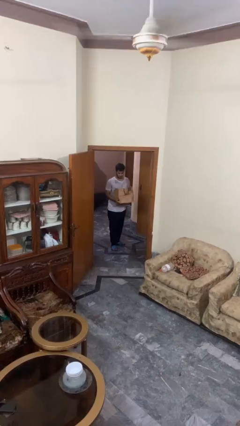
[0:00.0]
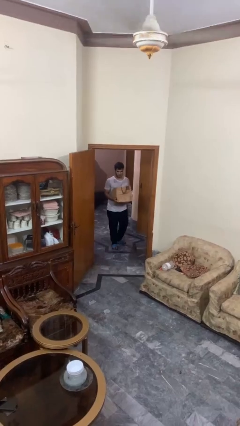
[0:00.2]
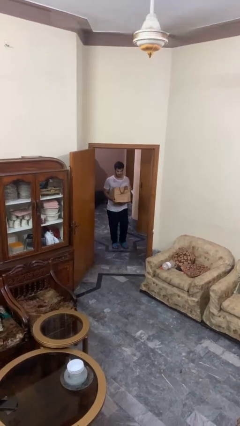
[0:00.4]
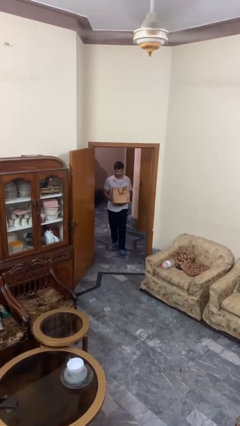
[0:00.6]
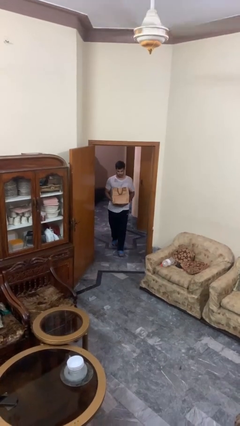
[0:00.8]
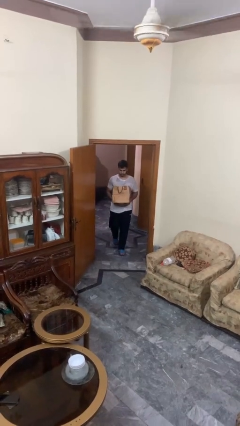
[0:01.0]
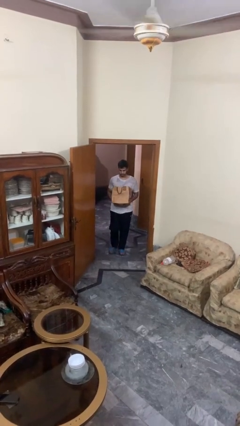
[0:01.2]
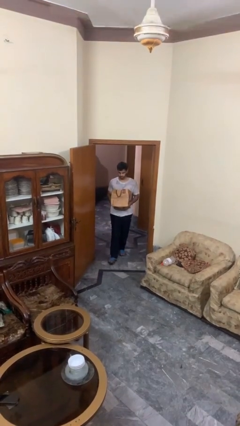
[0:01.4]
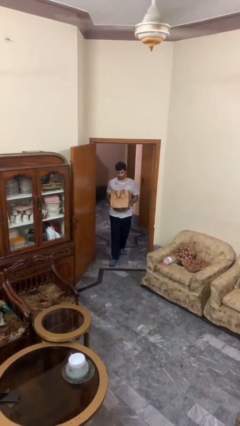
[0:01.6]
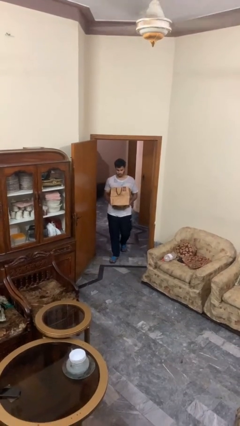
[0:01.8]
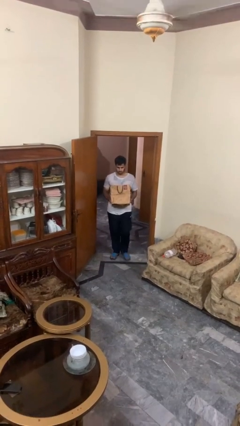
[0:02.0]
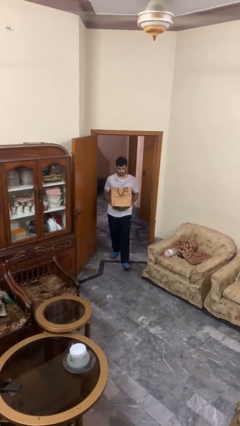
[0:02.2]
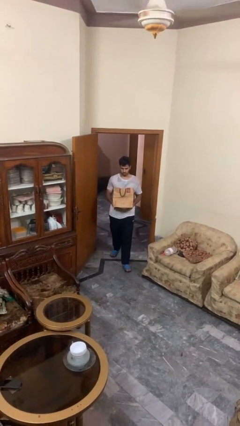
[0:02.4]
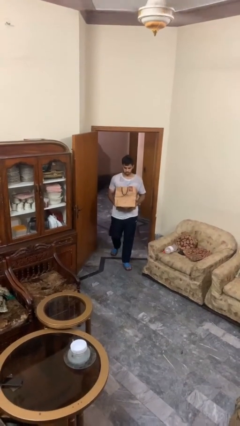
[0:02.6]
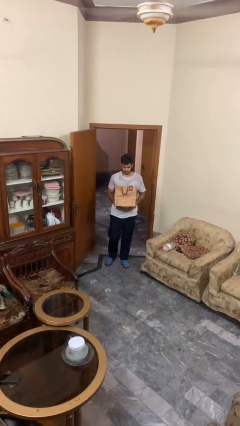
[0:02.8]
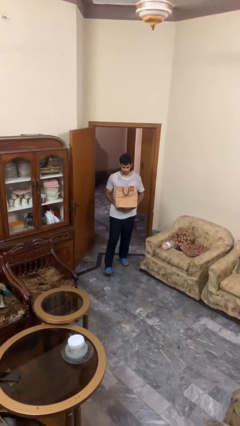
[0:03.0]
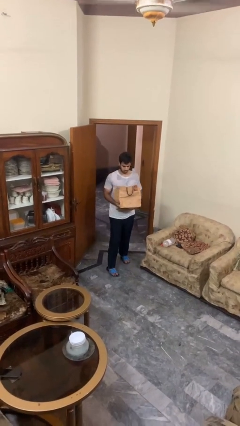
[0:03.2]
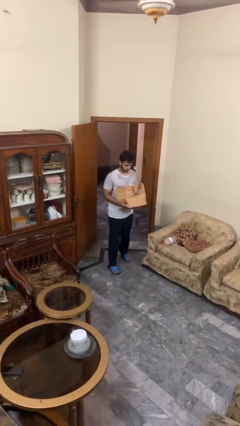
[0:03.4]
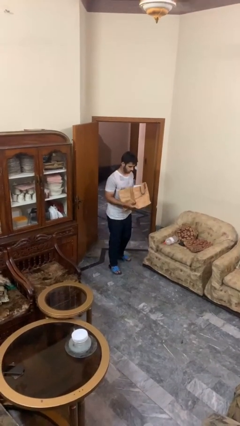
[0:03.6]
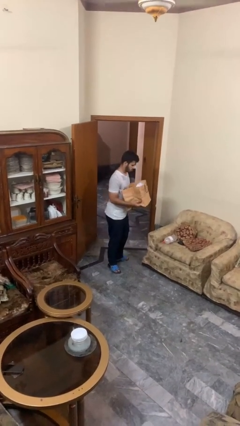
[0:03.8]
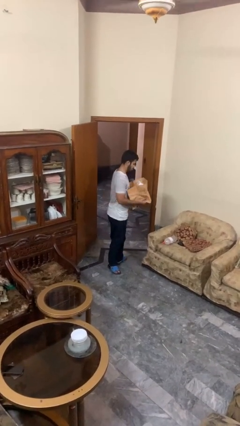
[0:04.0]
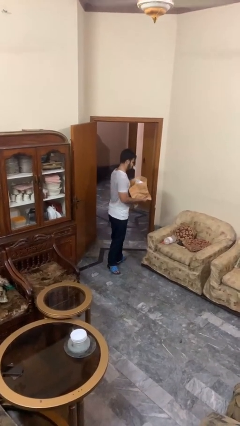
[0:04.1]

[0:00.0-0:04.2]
person carries groceries

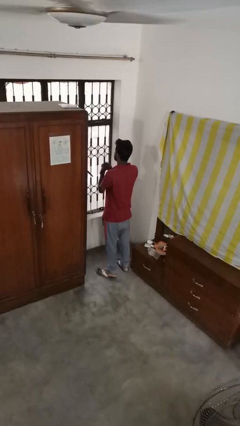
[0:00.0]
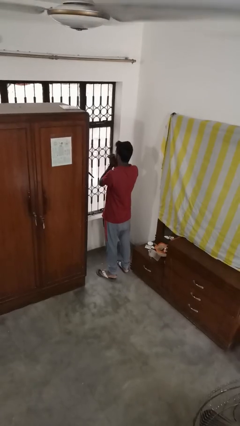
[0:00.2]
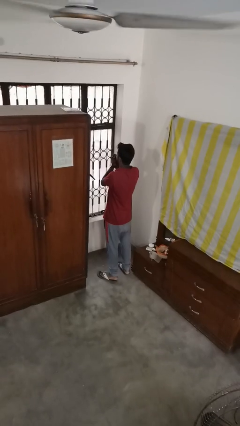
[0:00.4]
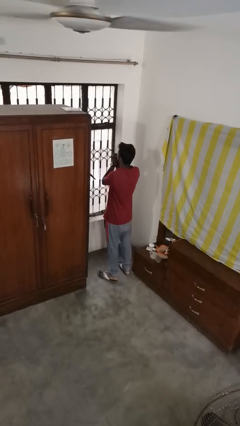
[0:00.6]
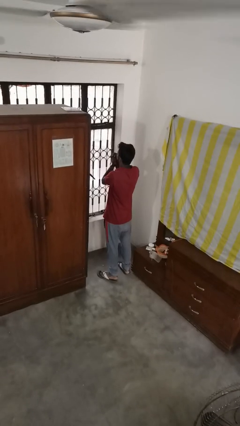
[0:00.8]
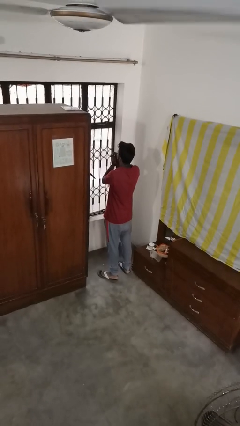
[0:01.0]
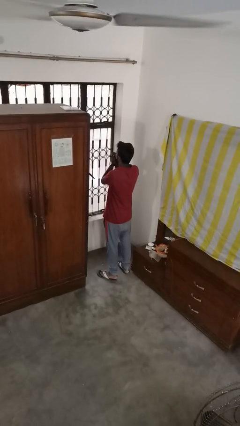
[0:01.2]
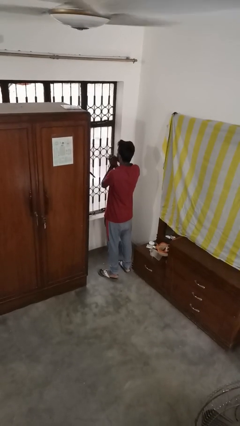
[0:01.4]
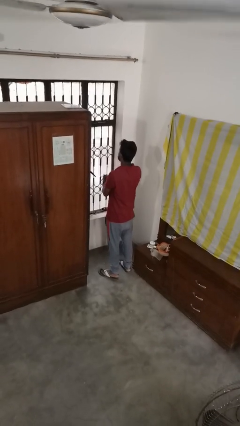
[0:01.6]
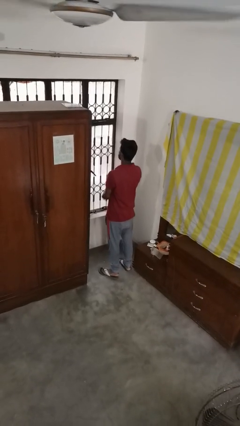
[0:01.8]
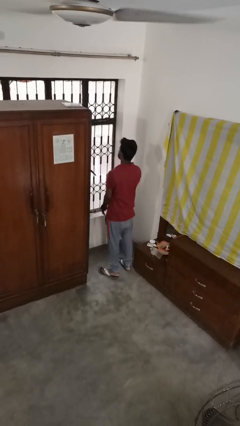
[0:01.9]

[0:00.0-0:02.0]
person blows into hands

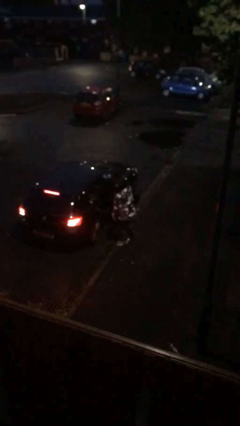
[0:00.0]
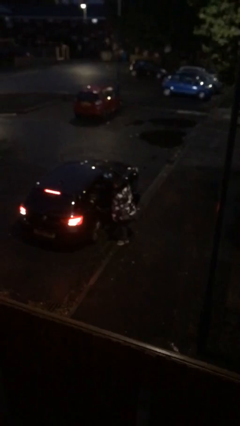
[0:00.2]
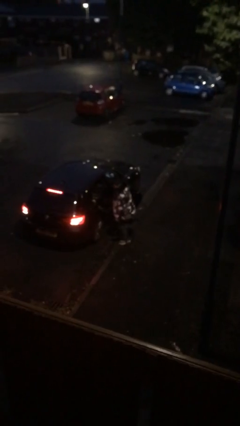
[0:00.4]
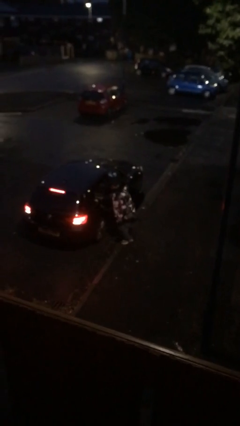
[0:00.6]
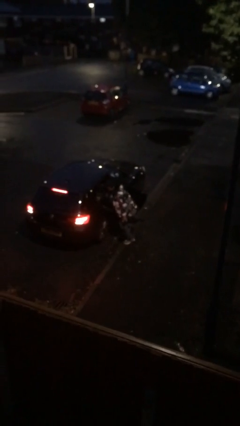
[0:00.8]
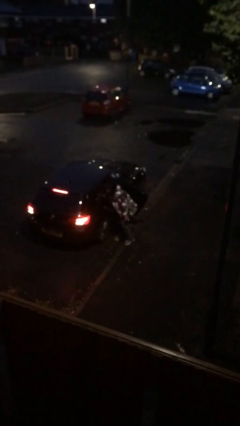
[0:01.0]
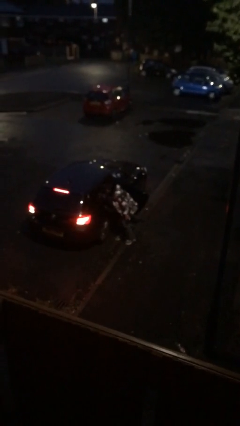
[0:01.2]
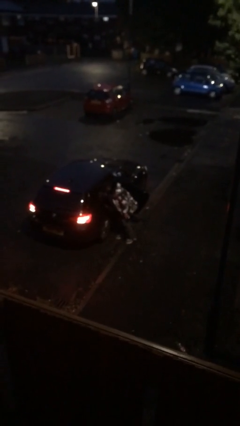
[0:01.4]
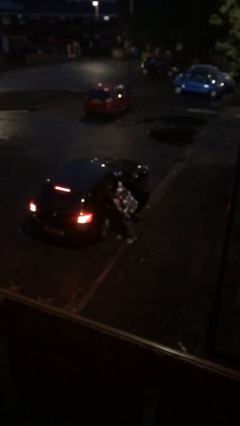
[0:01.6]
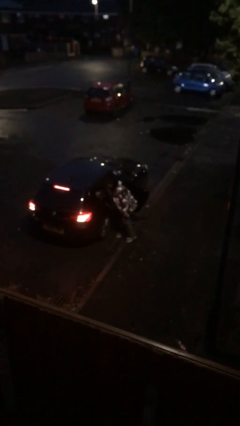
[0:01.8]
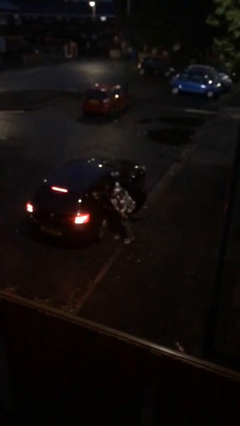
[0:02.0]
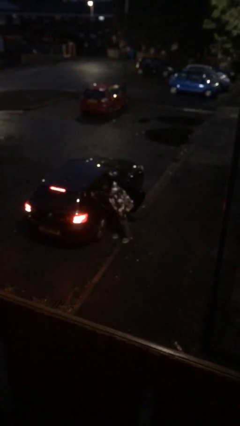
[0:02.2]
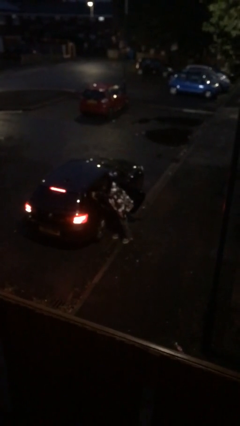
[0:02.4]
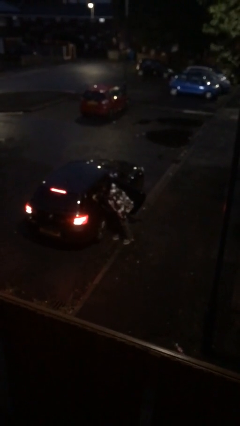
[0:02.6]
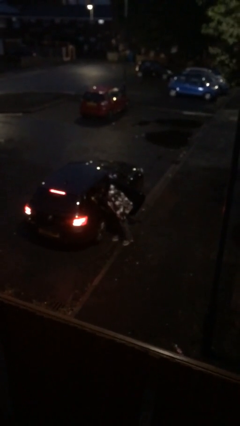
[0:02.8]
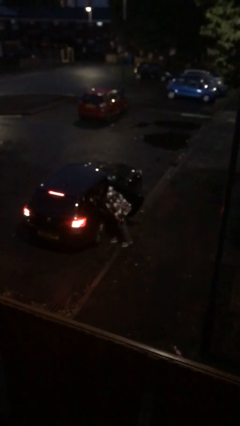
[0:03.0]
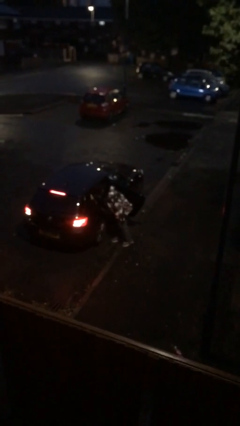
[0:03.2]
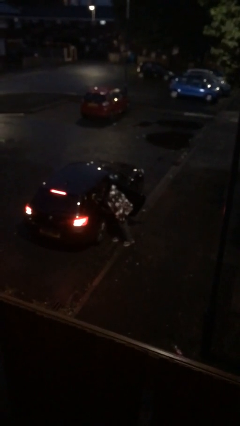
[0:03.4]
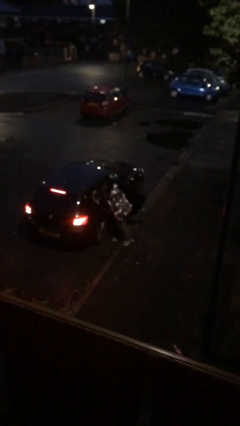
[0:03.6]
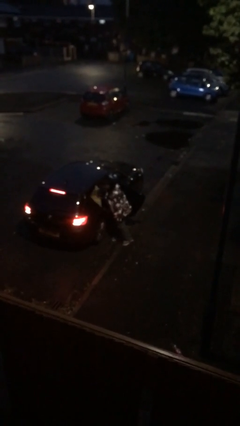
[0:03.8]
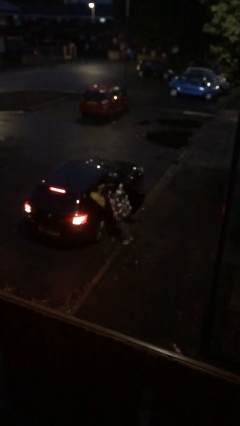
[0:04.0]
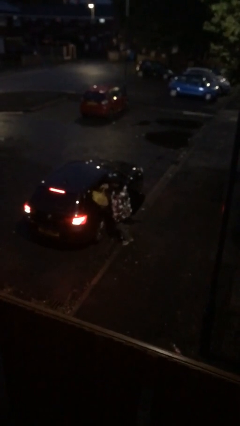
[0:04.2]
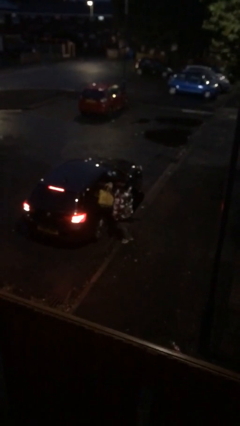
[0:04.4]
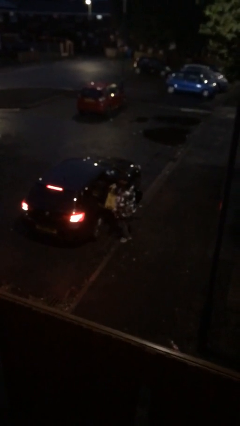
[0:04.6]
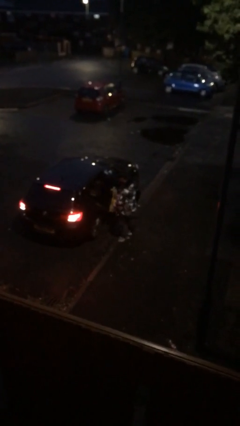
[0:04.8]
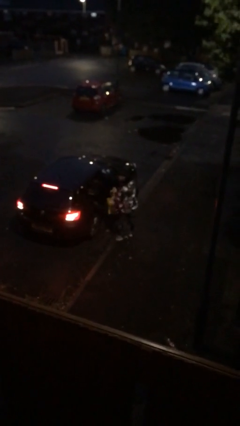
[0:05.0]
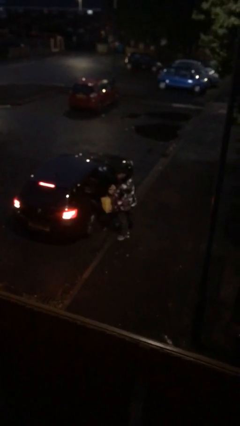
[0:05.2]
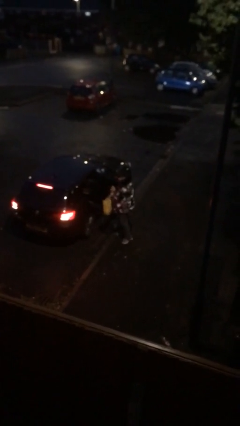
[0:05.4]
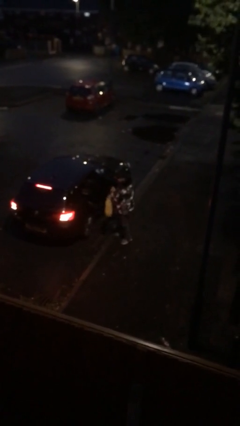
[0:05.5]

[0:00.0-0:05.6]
person unloads car

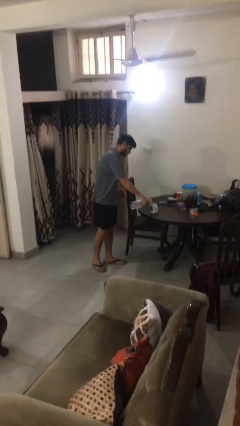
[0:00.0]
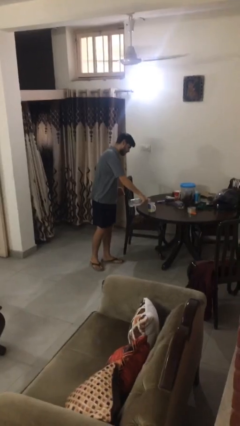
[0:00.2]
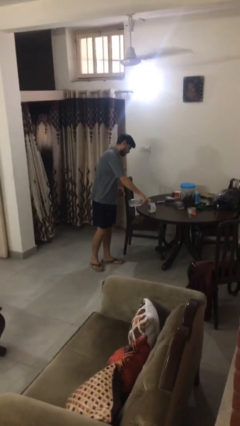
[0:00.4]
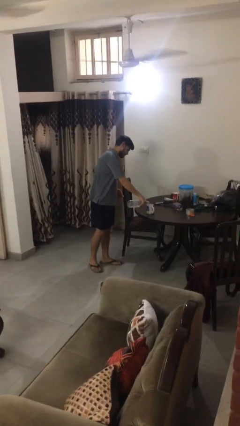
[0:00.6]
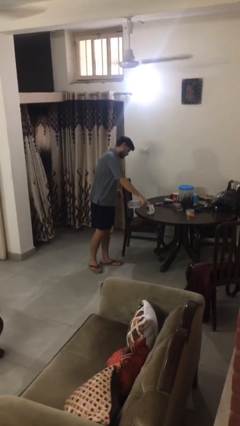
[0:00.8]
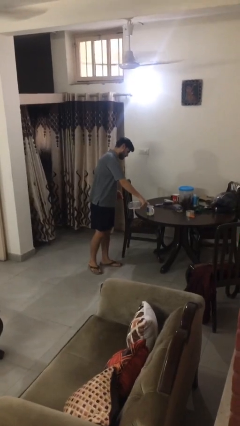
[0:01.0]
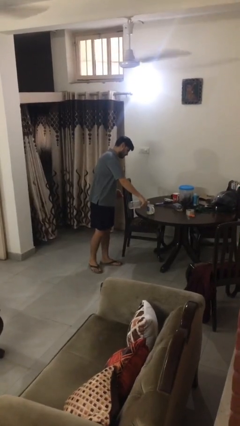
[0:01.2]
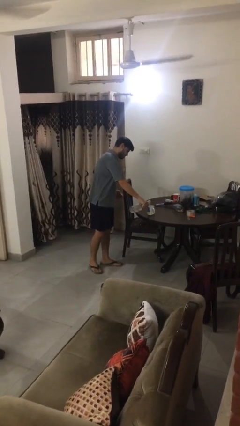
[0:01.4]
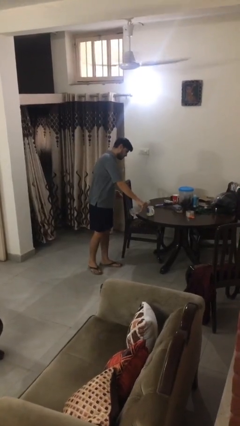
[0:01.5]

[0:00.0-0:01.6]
person pours liquid into cup

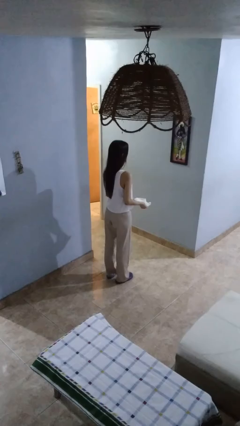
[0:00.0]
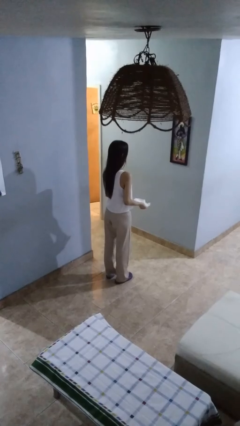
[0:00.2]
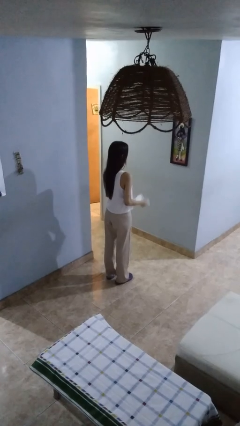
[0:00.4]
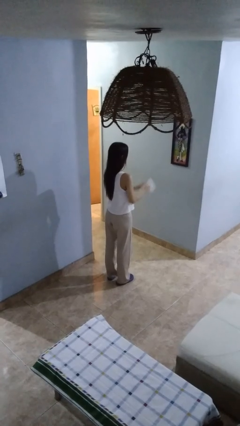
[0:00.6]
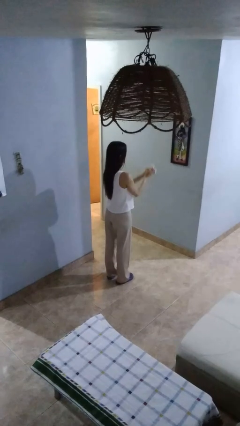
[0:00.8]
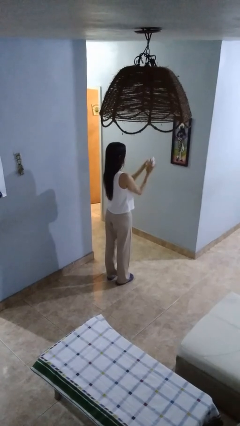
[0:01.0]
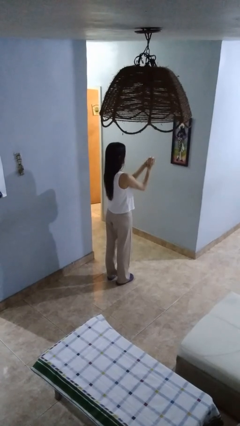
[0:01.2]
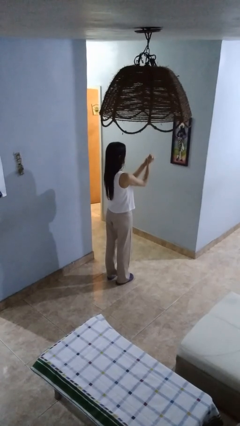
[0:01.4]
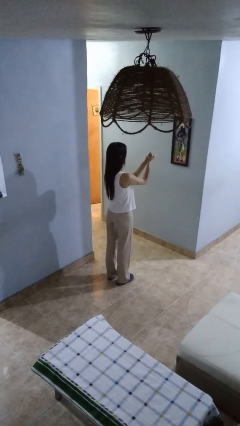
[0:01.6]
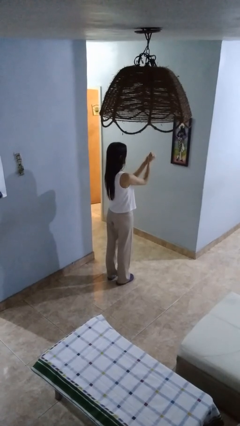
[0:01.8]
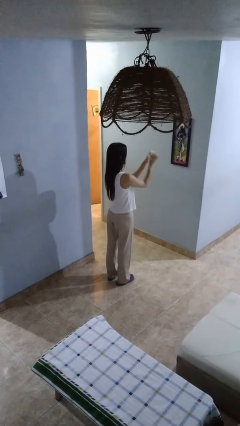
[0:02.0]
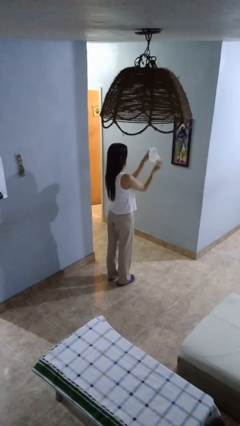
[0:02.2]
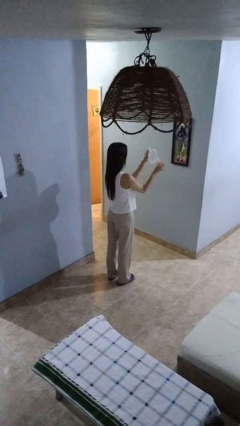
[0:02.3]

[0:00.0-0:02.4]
person crumples paper

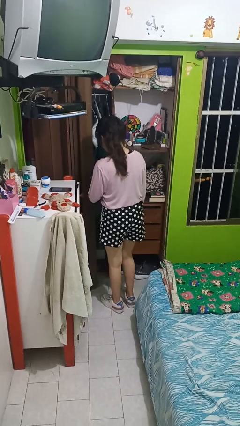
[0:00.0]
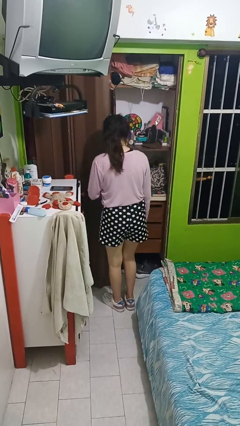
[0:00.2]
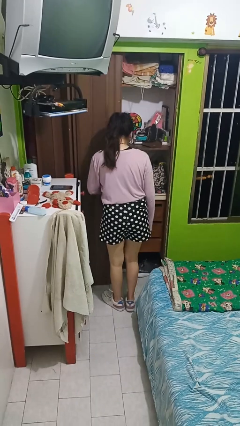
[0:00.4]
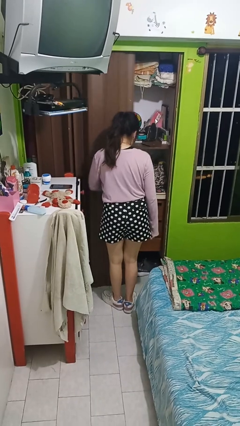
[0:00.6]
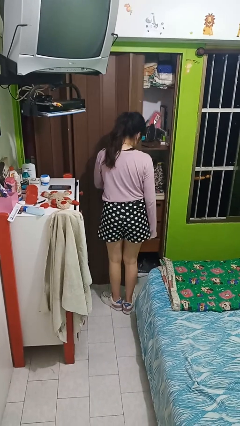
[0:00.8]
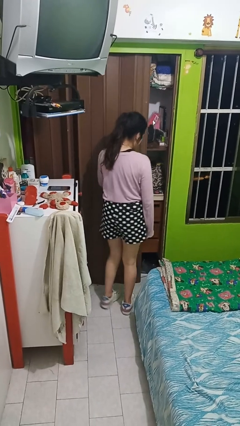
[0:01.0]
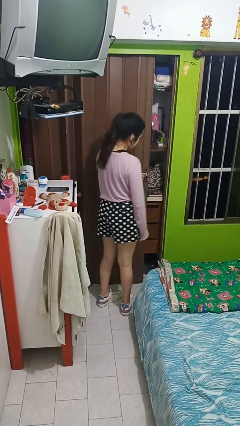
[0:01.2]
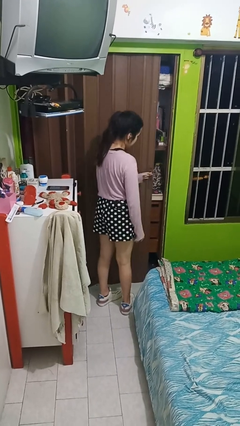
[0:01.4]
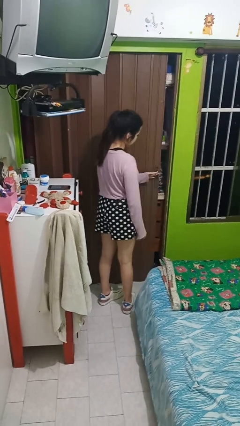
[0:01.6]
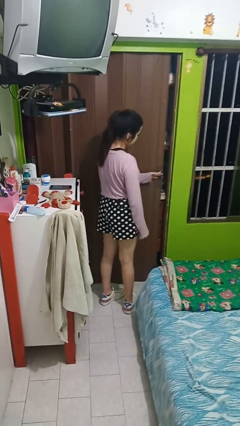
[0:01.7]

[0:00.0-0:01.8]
person closes sliding door
